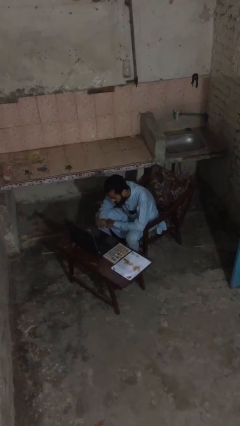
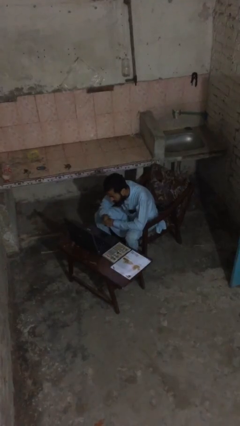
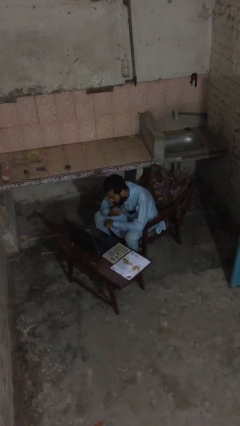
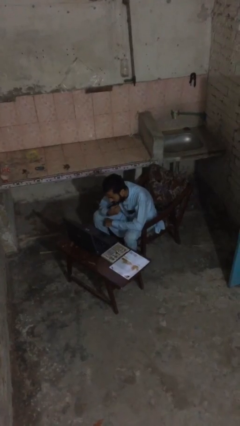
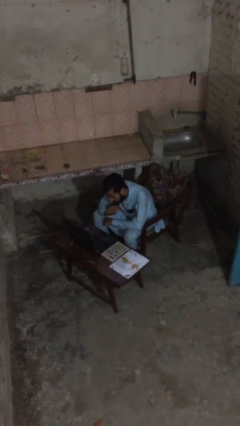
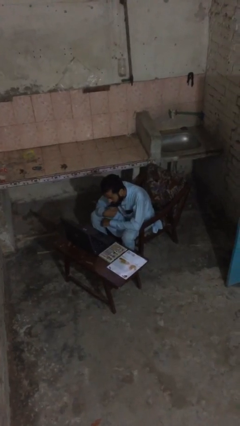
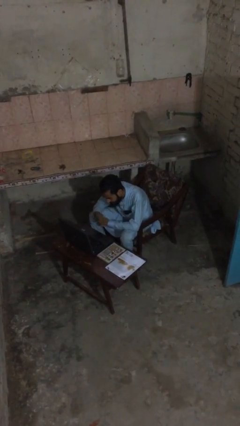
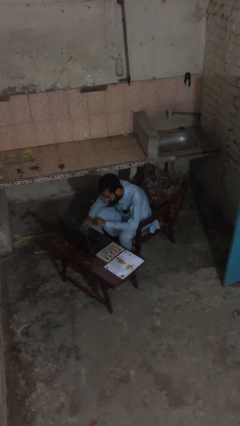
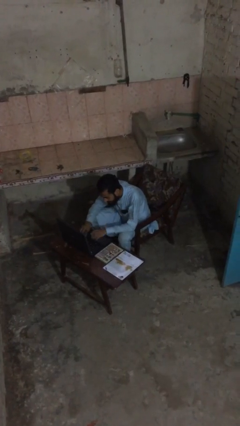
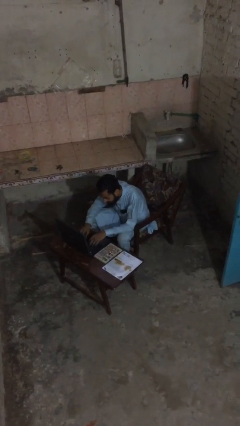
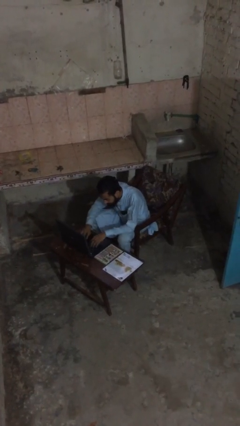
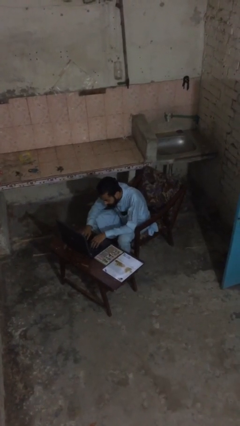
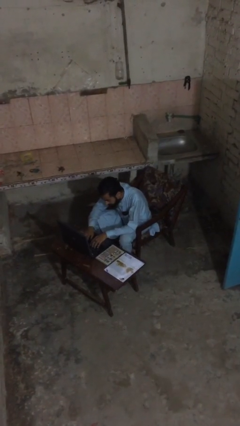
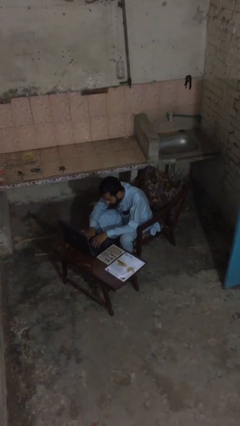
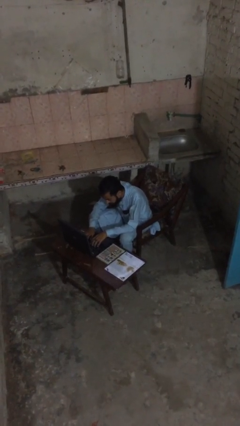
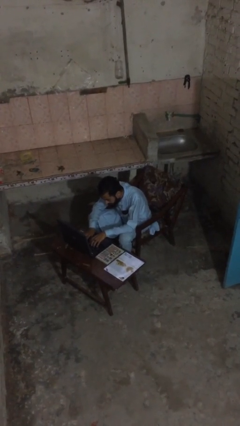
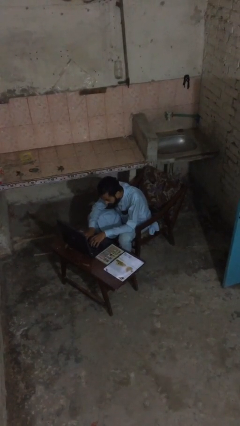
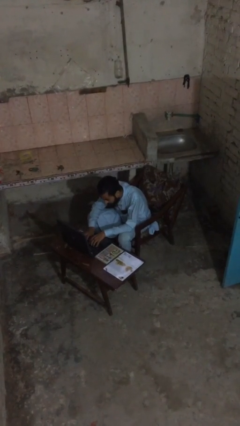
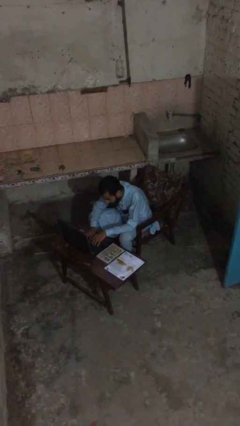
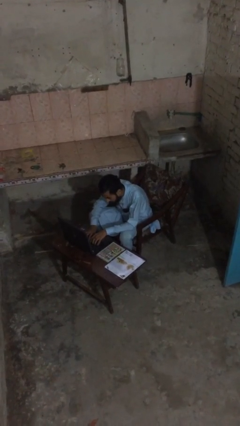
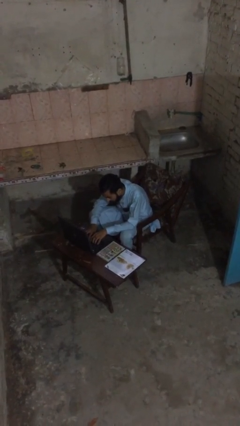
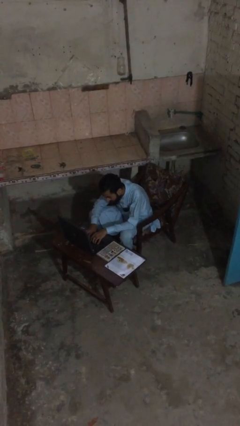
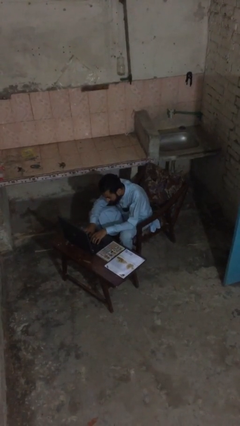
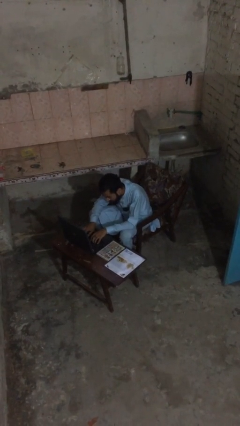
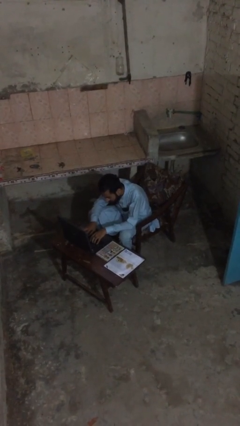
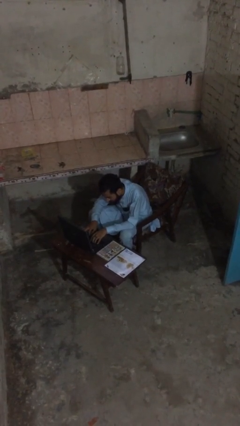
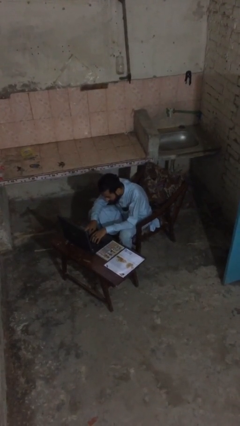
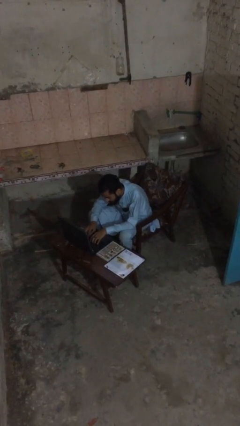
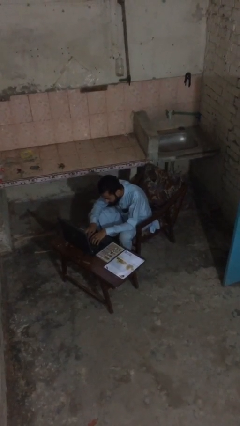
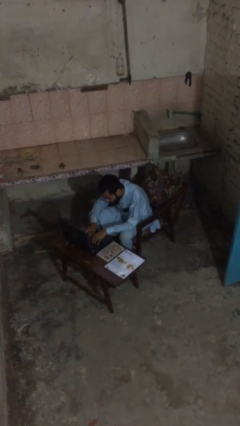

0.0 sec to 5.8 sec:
person interacts with laptop

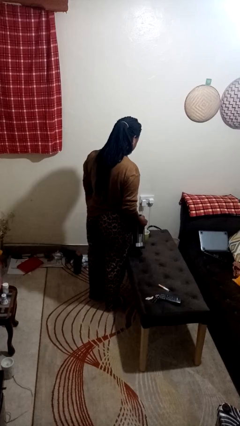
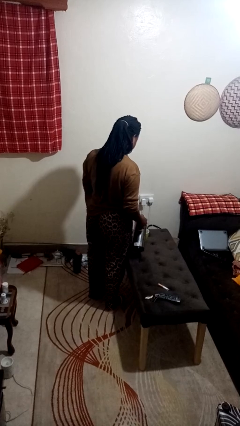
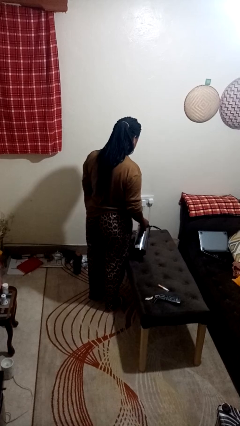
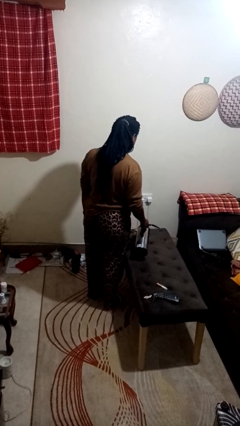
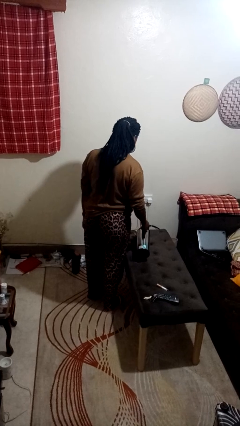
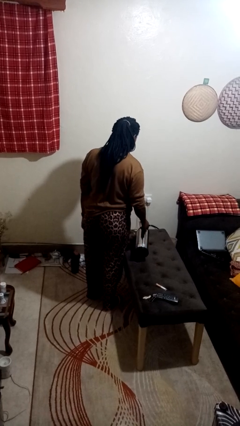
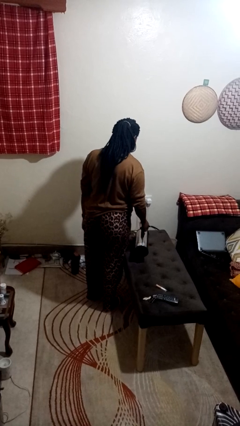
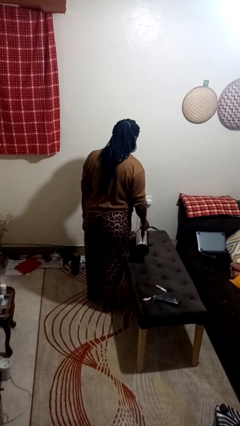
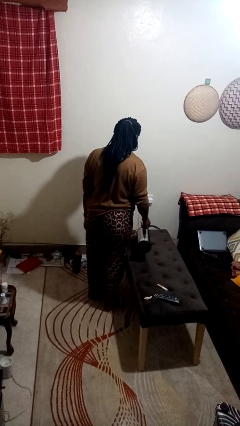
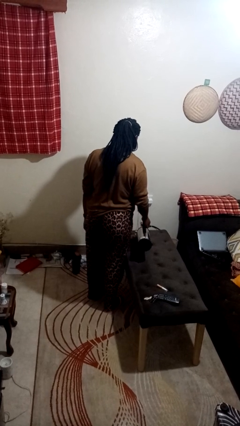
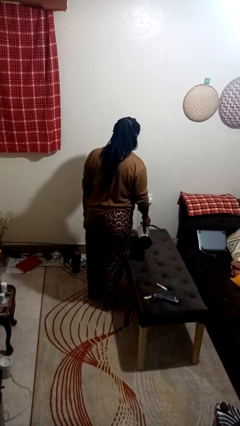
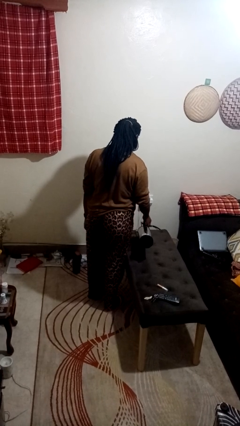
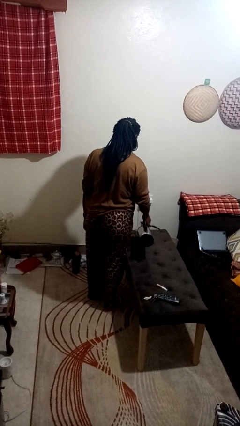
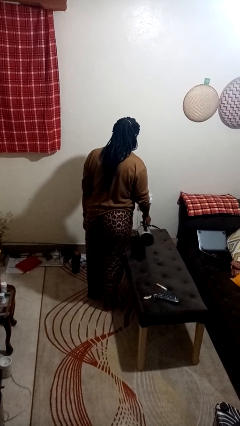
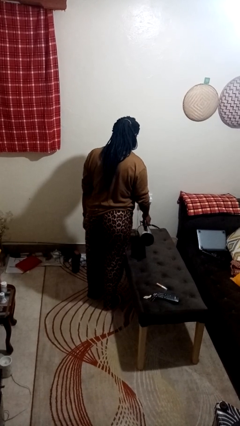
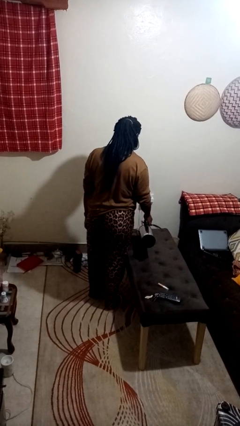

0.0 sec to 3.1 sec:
person pours coffee into mug

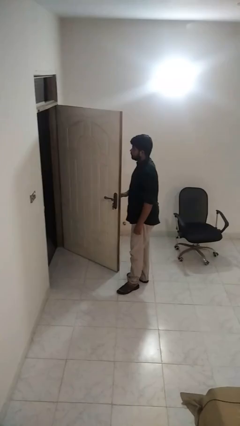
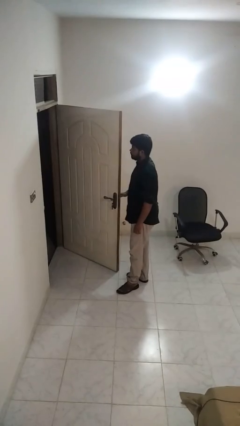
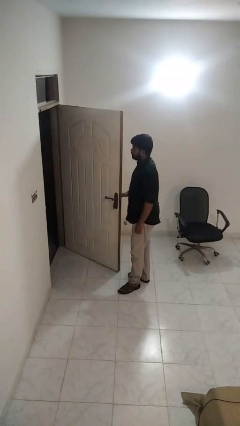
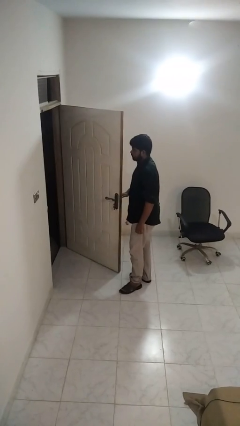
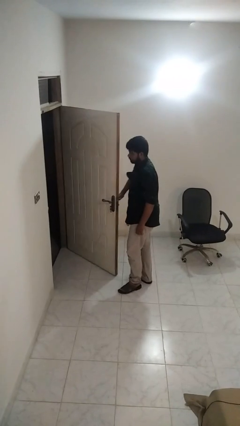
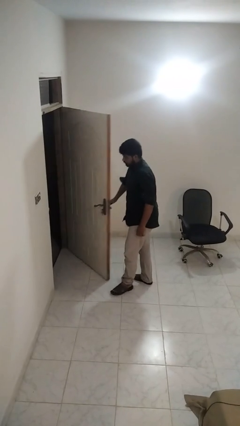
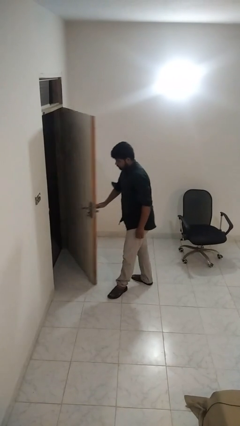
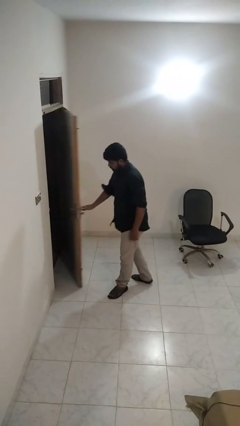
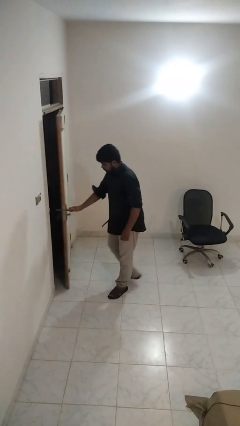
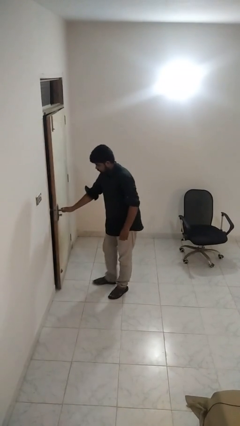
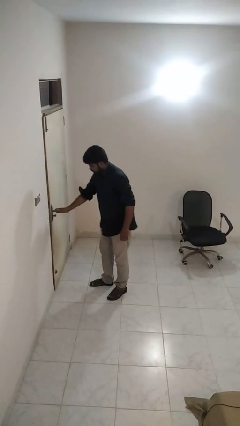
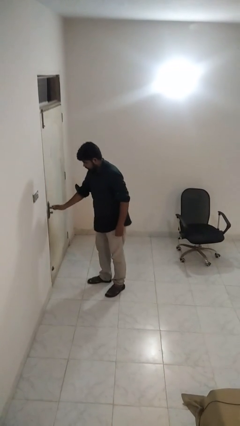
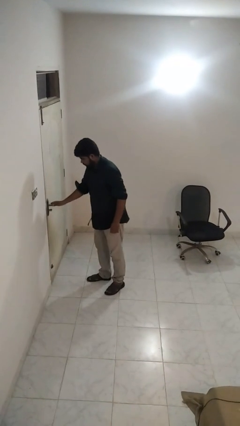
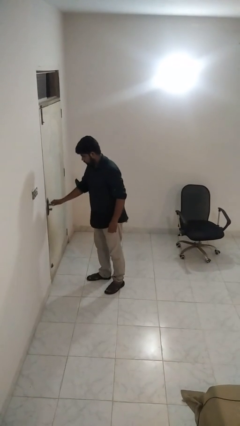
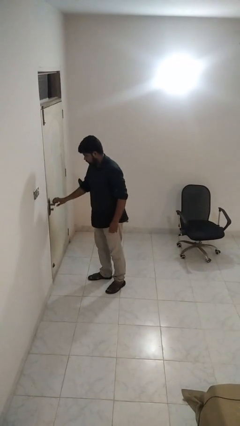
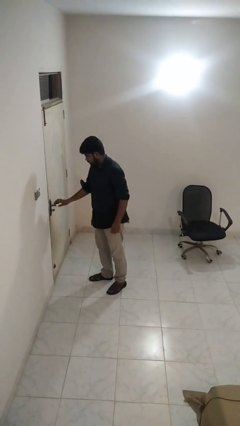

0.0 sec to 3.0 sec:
person closes facility door

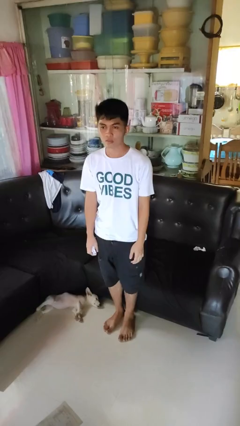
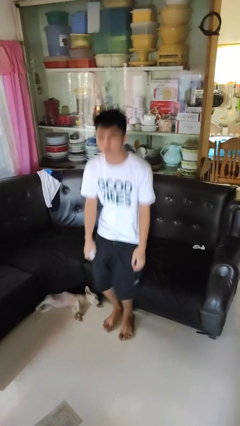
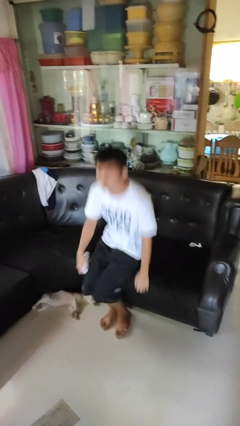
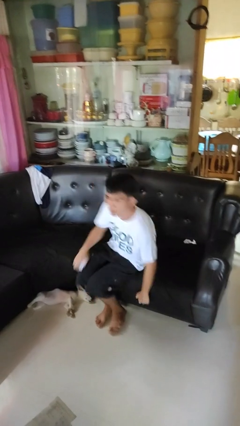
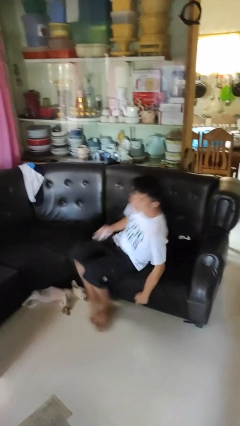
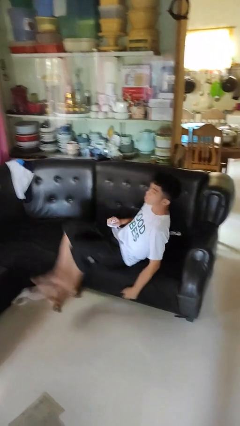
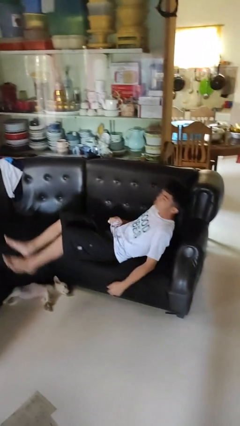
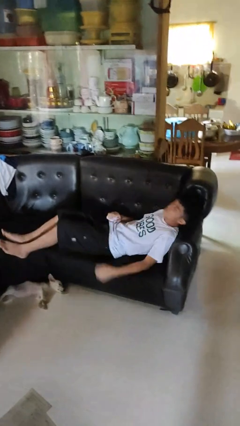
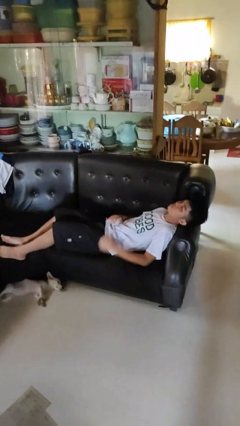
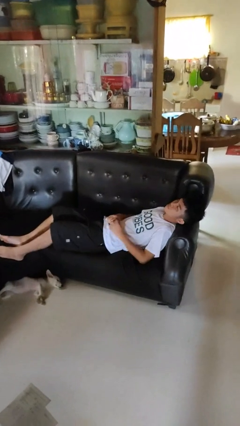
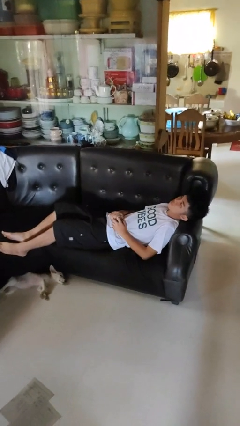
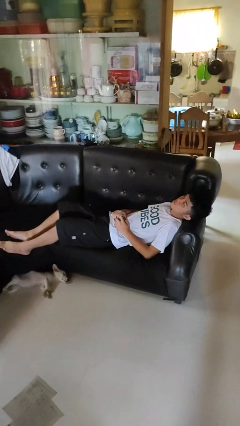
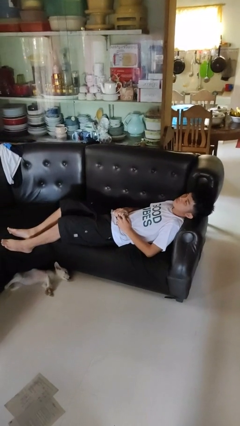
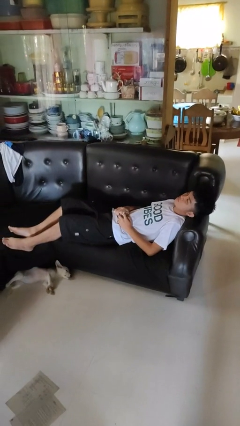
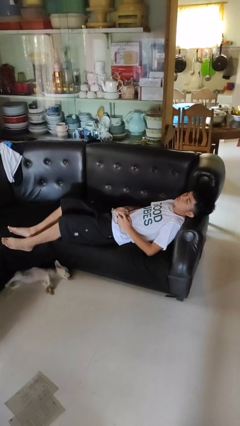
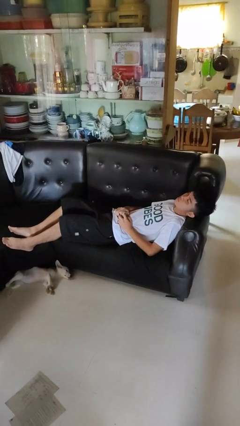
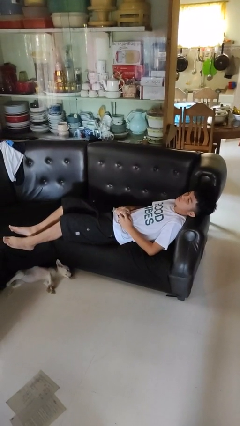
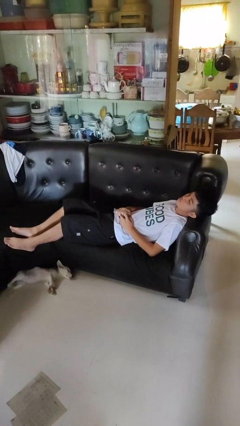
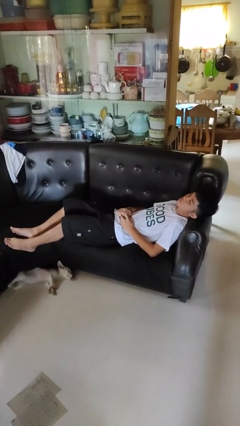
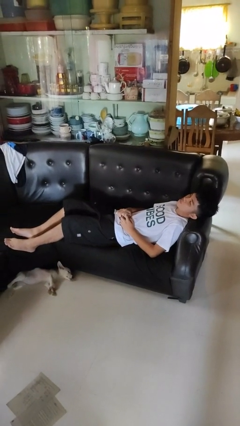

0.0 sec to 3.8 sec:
person lies down on couch

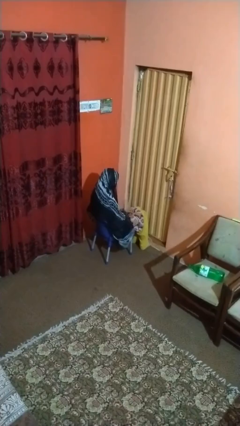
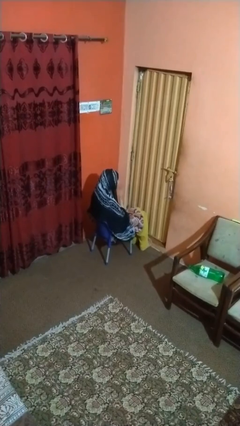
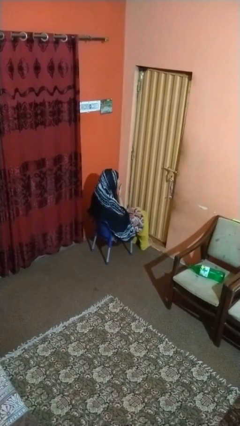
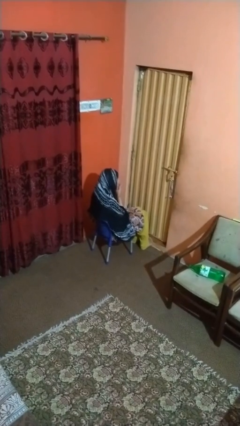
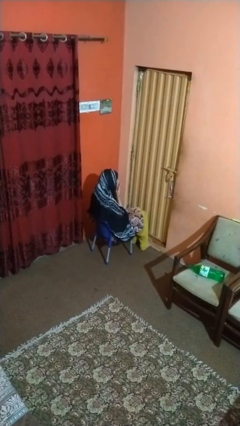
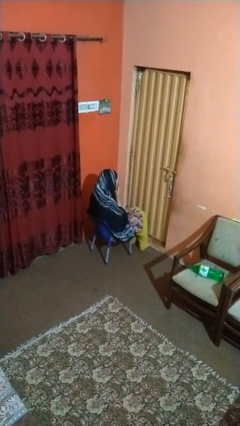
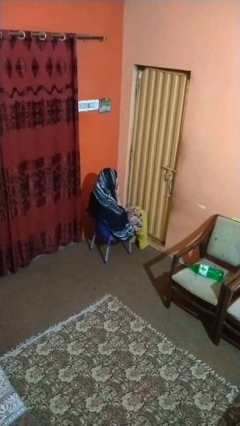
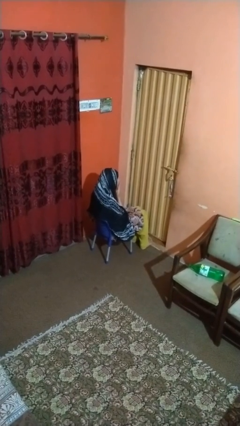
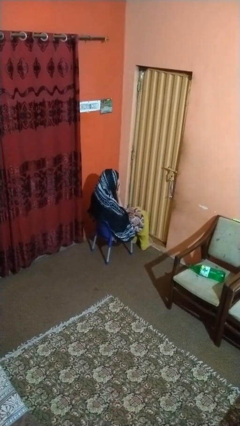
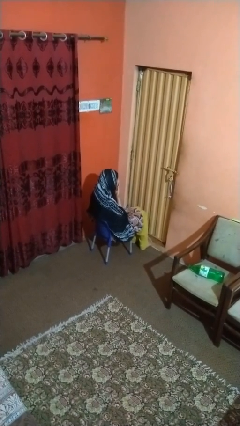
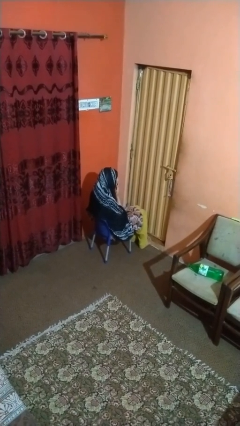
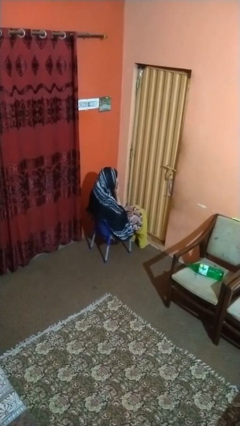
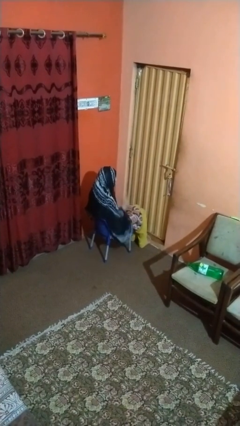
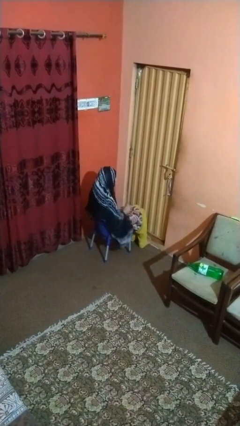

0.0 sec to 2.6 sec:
person yawns
